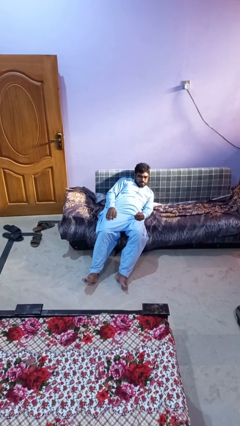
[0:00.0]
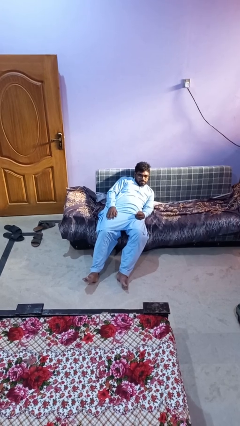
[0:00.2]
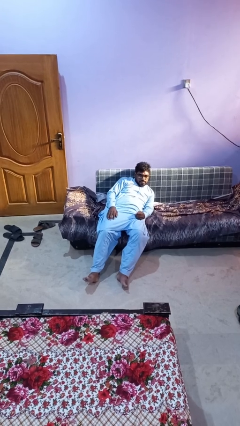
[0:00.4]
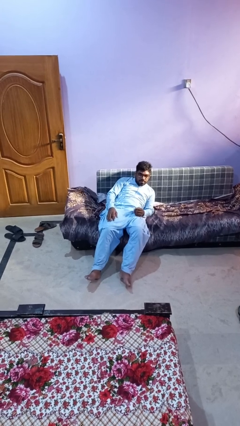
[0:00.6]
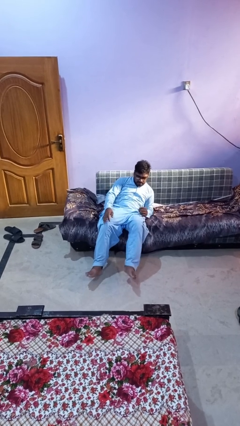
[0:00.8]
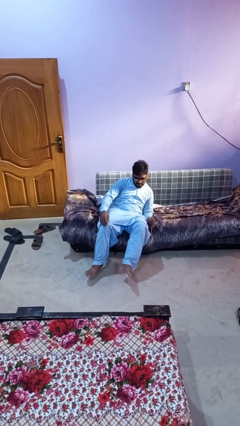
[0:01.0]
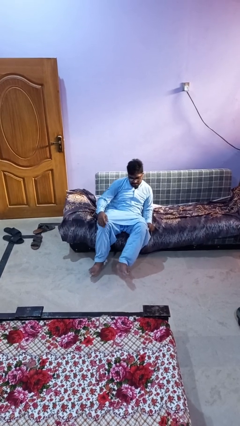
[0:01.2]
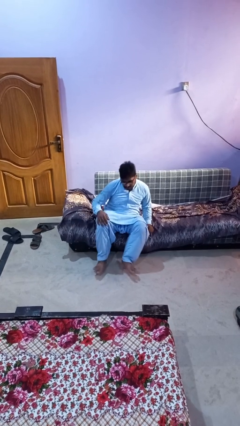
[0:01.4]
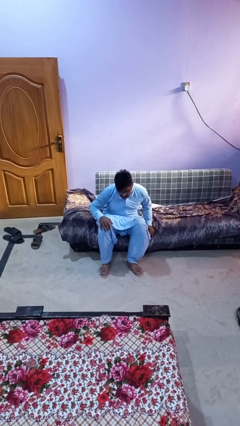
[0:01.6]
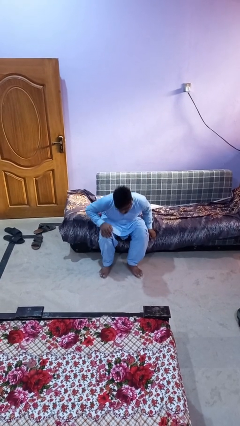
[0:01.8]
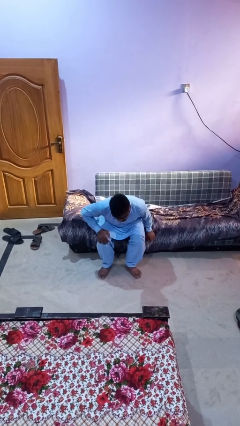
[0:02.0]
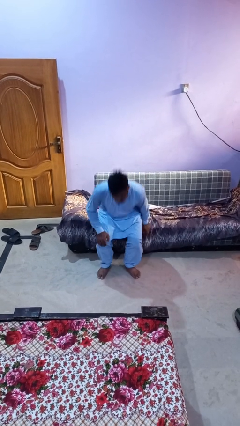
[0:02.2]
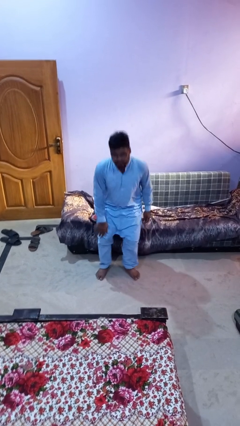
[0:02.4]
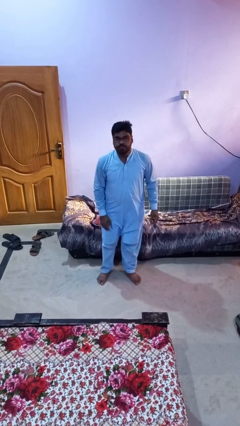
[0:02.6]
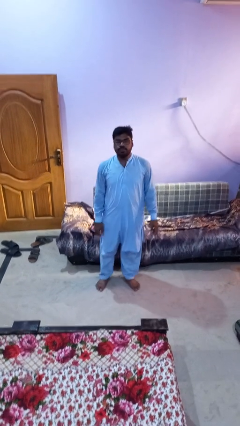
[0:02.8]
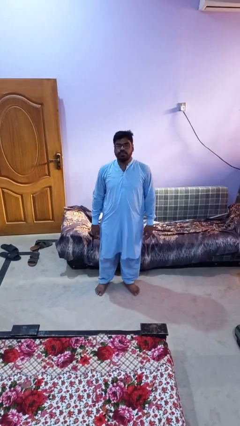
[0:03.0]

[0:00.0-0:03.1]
person stands up

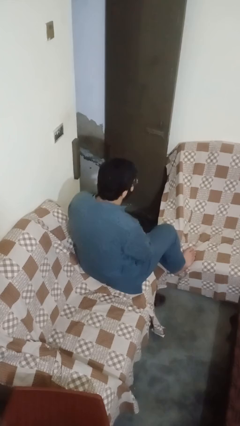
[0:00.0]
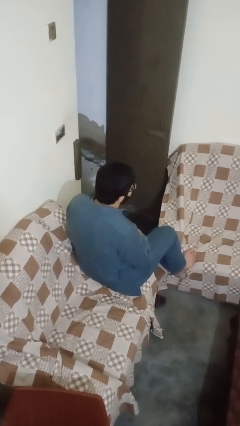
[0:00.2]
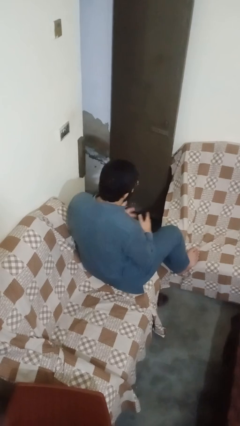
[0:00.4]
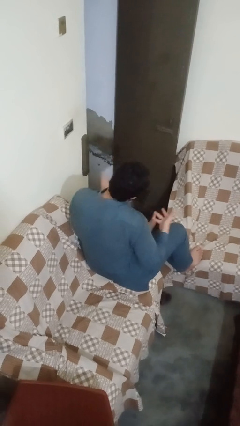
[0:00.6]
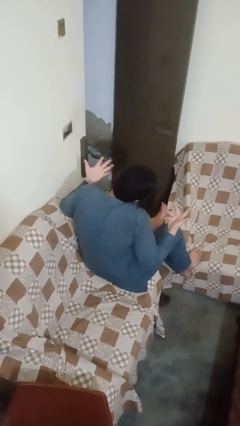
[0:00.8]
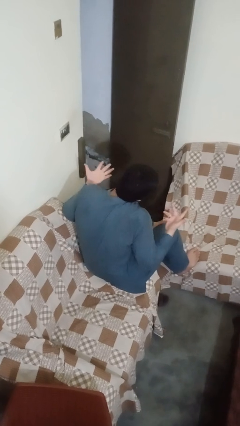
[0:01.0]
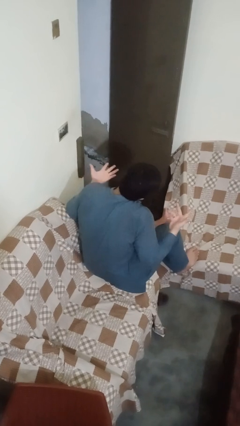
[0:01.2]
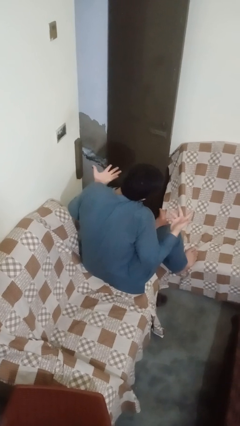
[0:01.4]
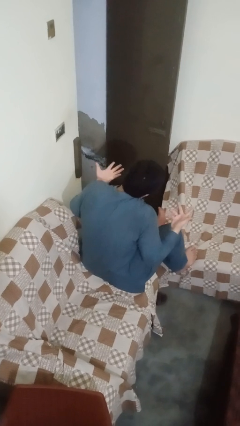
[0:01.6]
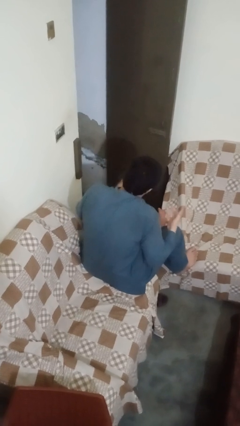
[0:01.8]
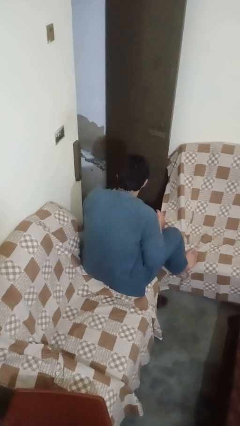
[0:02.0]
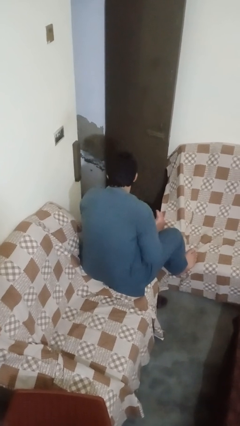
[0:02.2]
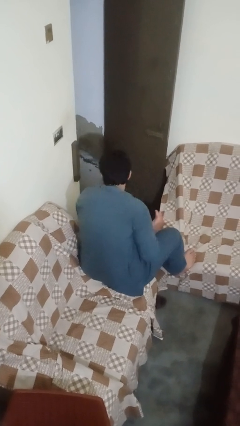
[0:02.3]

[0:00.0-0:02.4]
person shrugs

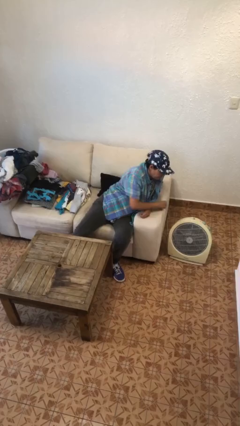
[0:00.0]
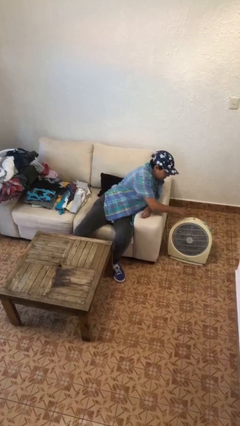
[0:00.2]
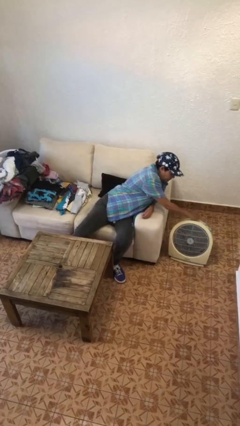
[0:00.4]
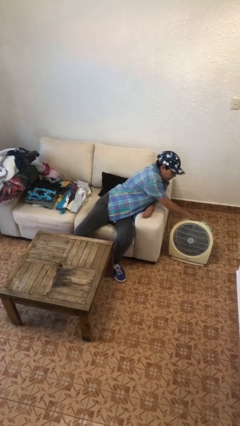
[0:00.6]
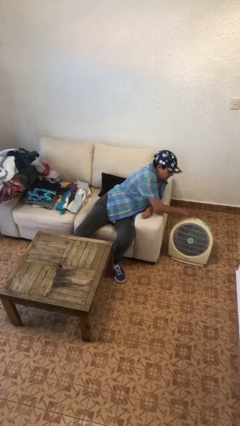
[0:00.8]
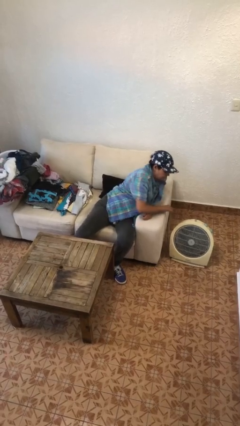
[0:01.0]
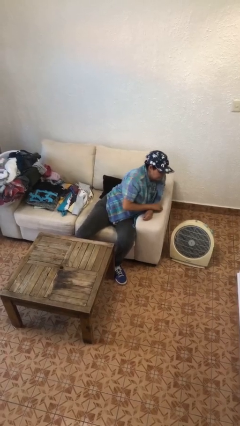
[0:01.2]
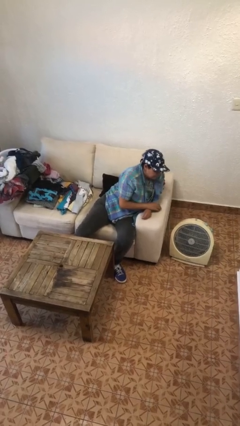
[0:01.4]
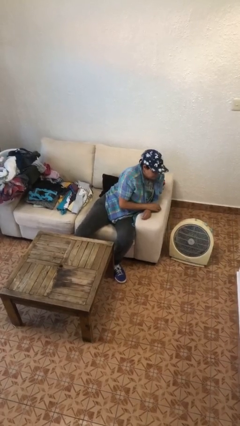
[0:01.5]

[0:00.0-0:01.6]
person turns off fan

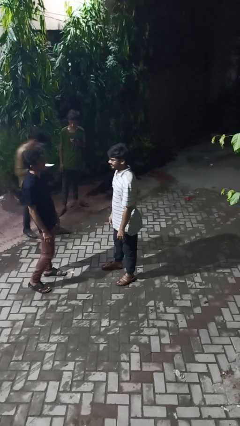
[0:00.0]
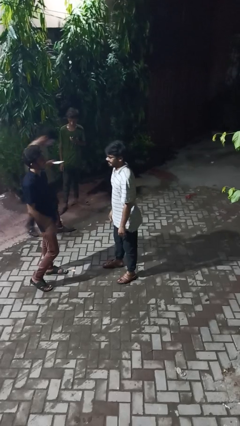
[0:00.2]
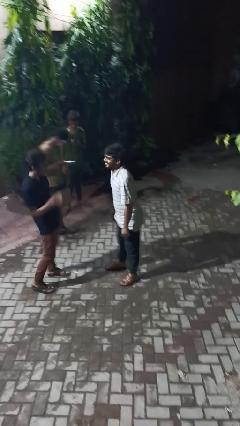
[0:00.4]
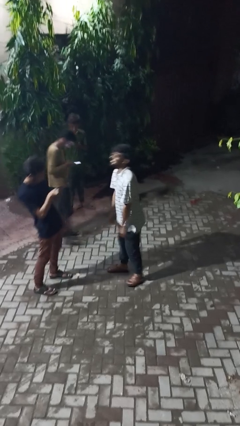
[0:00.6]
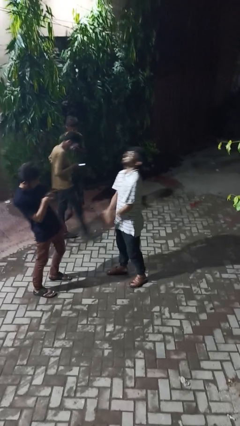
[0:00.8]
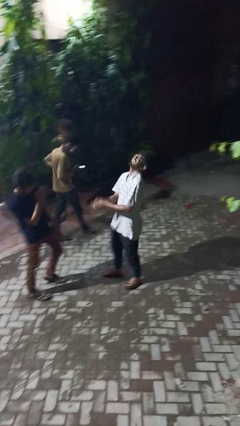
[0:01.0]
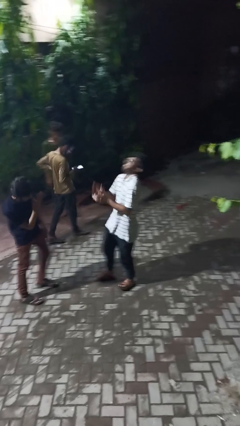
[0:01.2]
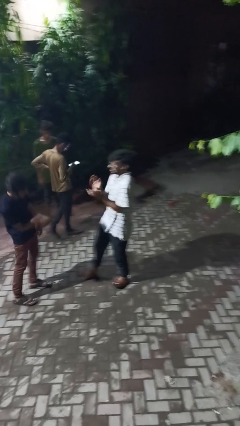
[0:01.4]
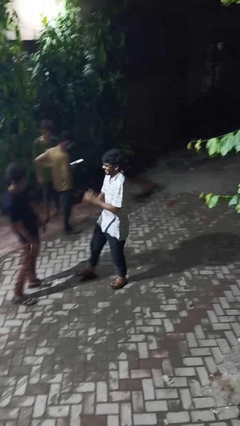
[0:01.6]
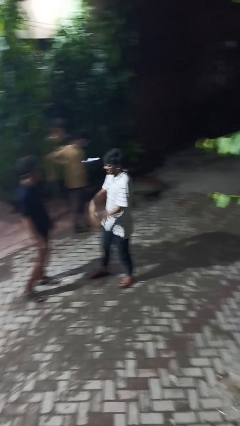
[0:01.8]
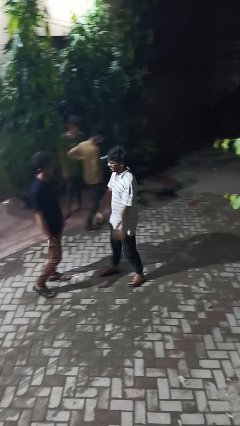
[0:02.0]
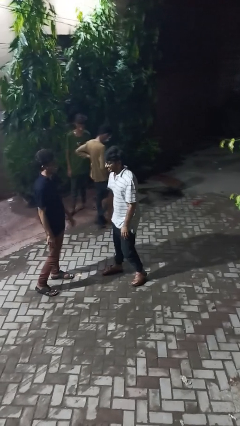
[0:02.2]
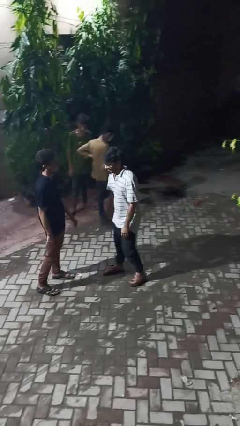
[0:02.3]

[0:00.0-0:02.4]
person laughs with person

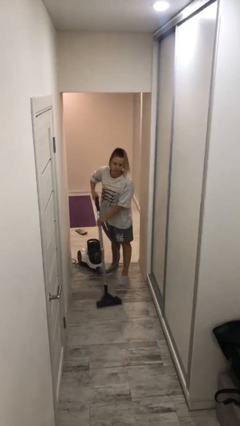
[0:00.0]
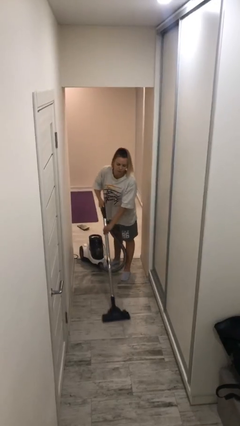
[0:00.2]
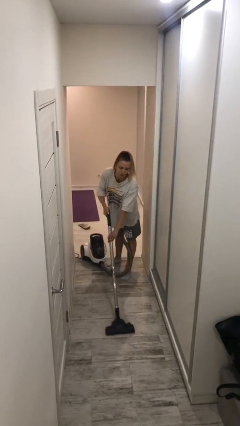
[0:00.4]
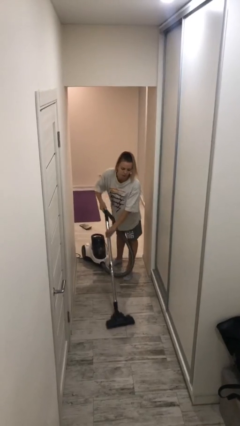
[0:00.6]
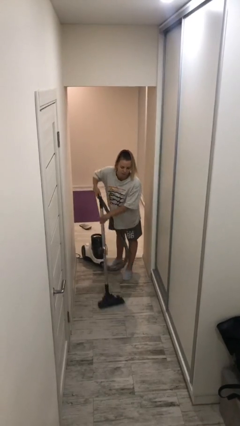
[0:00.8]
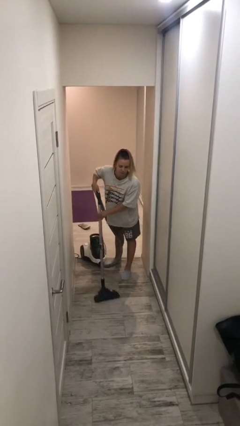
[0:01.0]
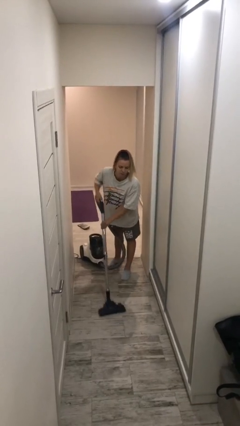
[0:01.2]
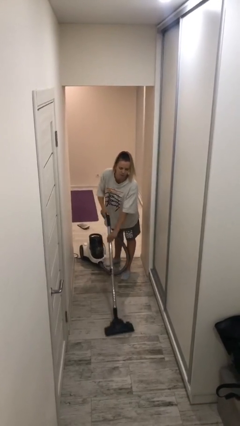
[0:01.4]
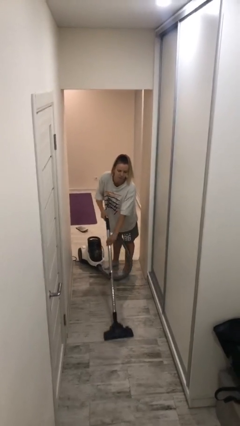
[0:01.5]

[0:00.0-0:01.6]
person vacuums carpet

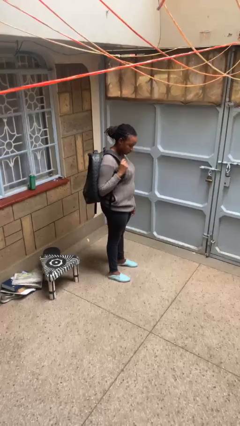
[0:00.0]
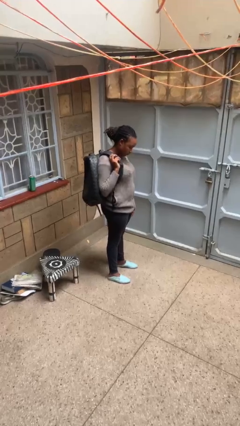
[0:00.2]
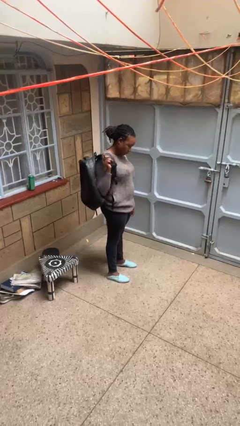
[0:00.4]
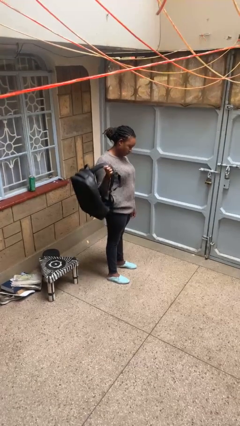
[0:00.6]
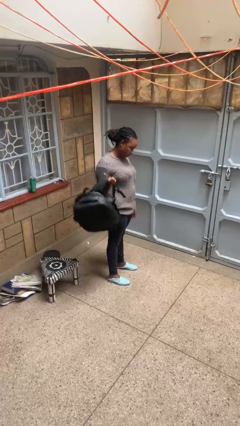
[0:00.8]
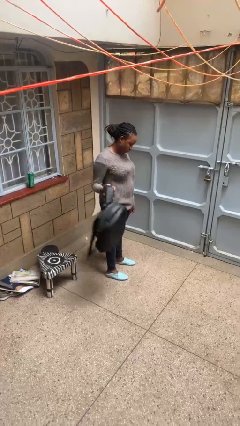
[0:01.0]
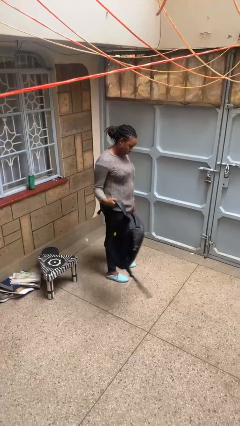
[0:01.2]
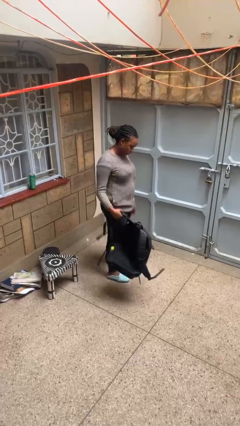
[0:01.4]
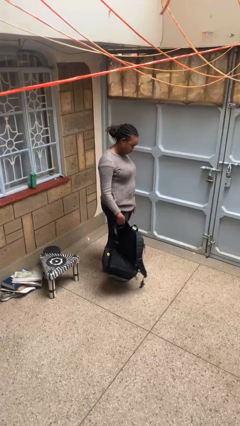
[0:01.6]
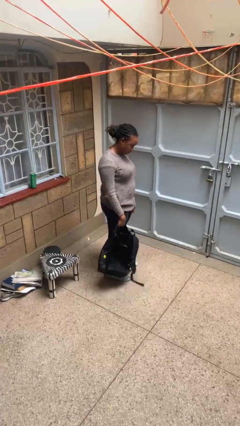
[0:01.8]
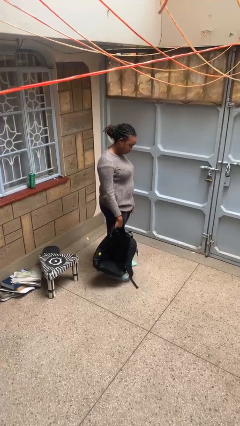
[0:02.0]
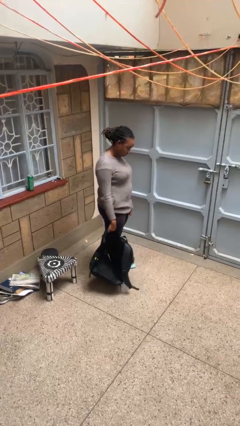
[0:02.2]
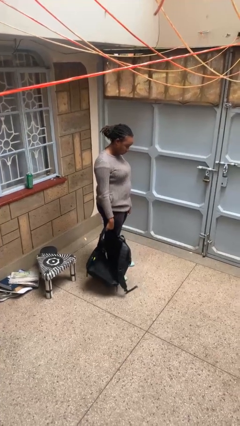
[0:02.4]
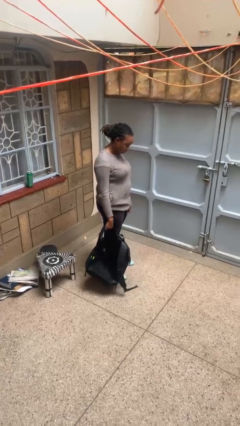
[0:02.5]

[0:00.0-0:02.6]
person takes off backpack

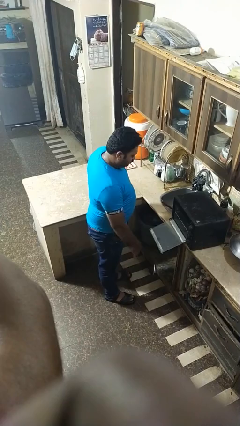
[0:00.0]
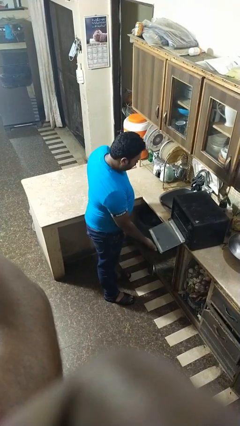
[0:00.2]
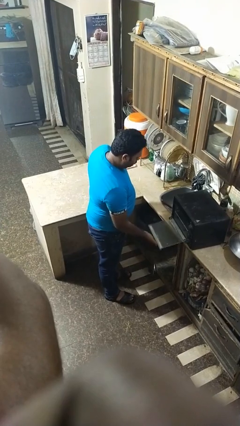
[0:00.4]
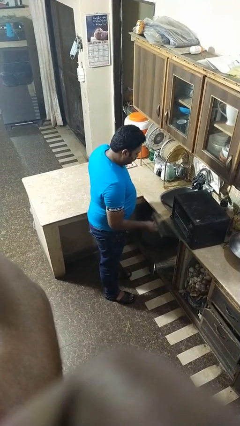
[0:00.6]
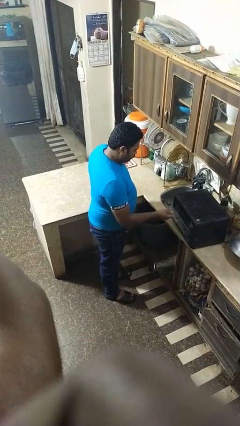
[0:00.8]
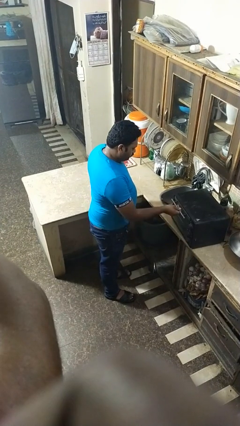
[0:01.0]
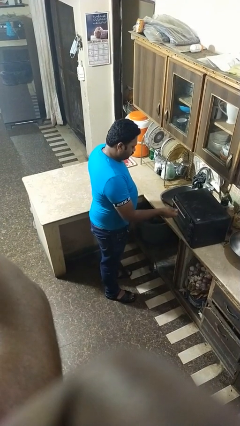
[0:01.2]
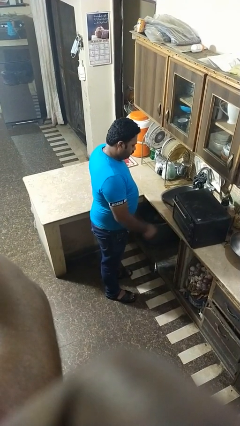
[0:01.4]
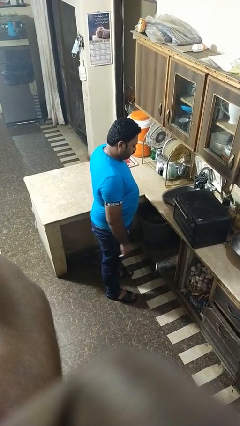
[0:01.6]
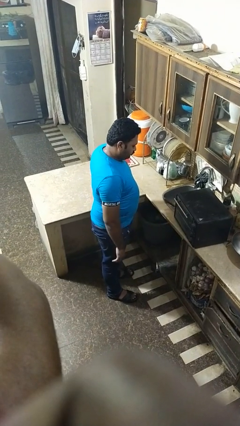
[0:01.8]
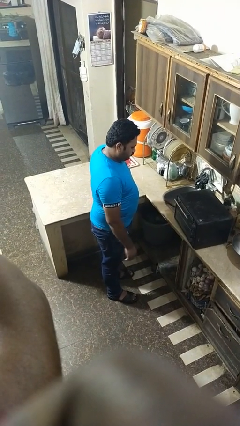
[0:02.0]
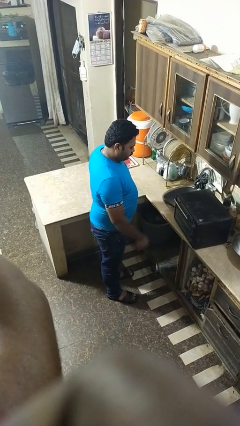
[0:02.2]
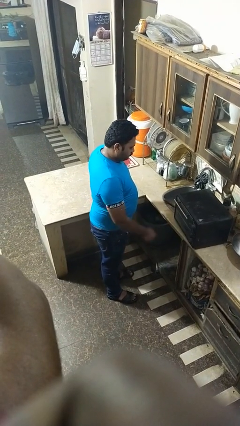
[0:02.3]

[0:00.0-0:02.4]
person closes oven door

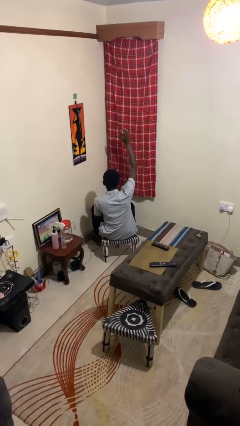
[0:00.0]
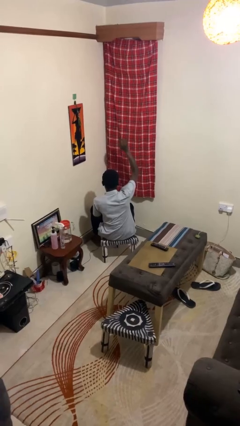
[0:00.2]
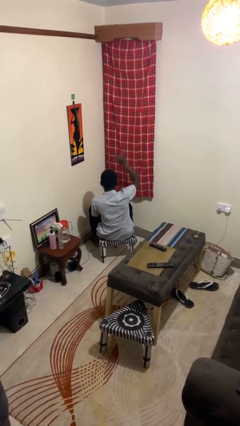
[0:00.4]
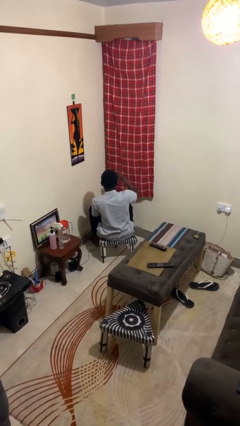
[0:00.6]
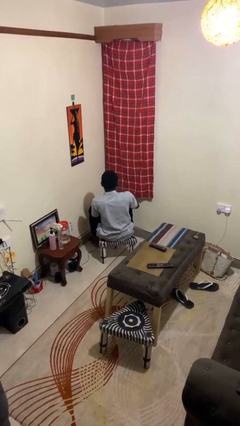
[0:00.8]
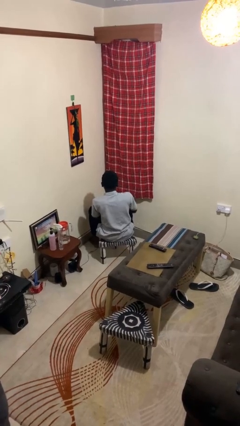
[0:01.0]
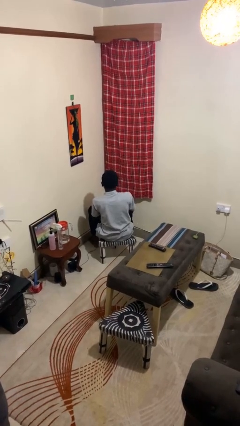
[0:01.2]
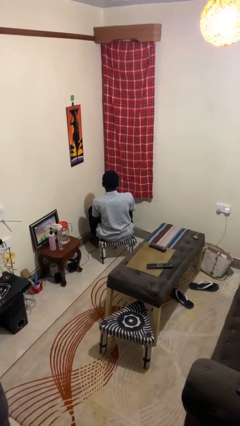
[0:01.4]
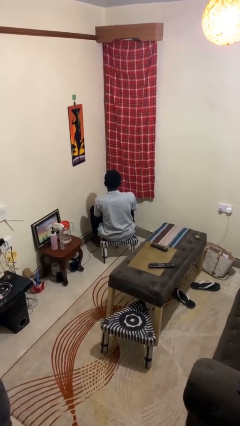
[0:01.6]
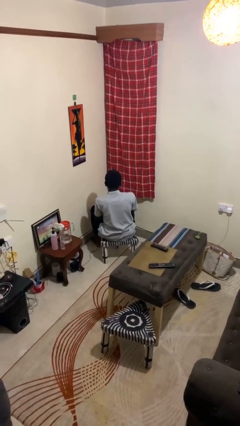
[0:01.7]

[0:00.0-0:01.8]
person gestures lower hand
